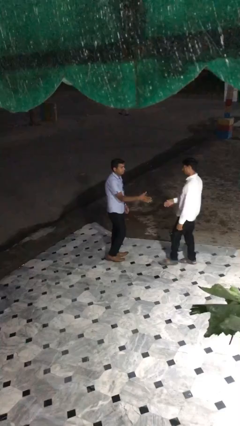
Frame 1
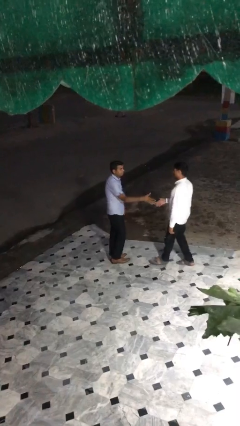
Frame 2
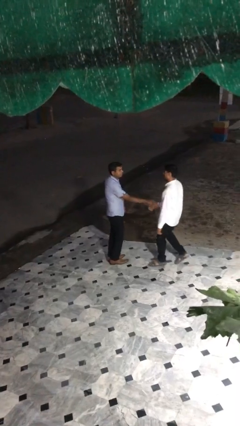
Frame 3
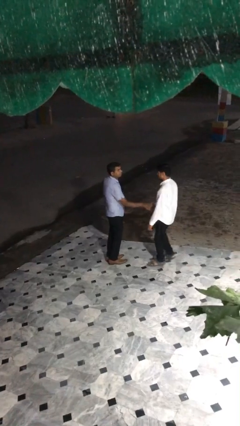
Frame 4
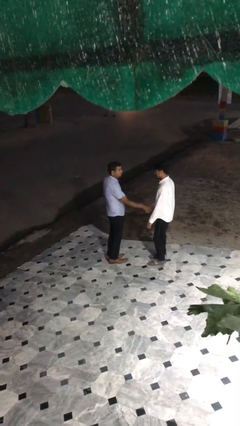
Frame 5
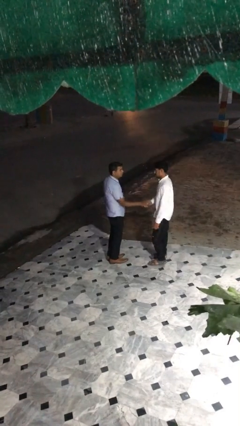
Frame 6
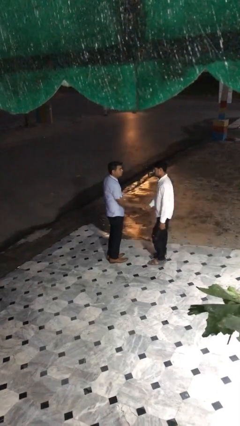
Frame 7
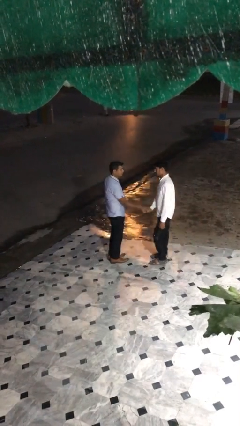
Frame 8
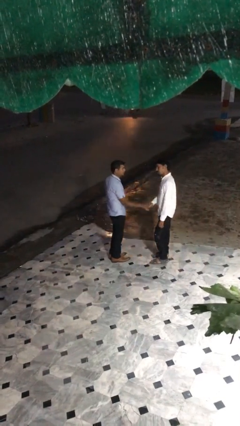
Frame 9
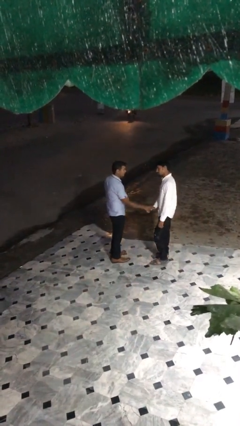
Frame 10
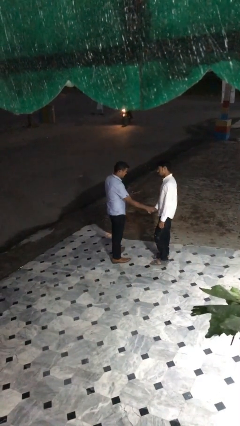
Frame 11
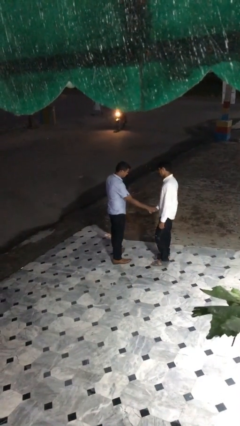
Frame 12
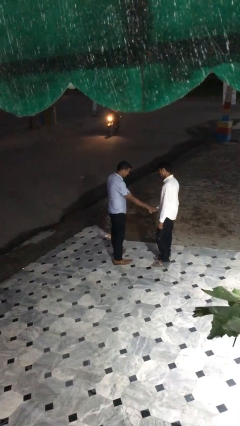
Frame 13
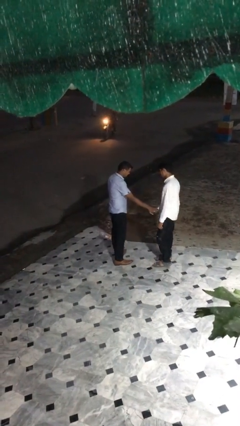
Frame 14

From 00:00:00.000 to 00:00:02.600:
person shakes hand

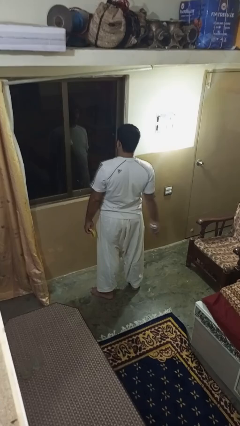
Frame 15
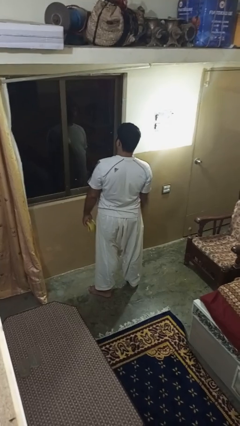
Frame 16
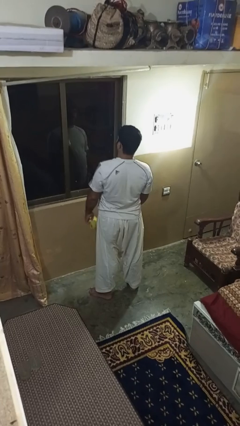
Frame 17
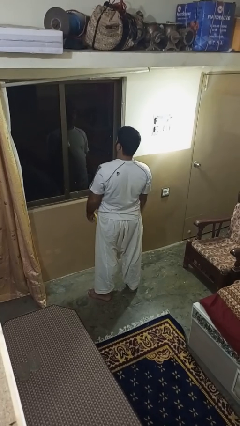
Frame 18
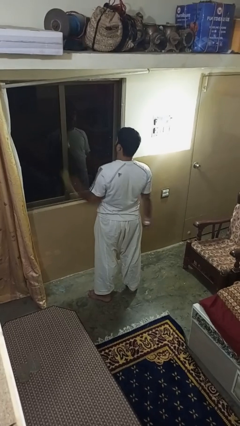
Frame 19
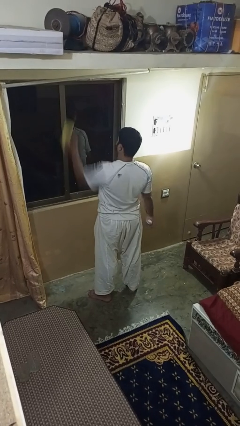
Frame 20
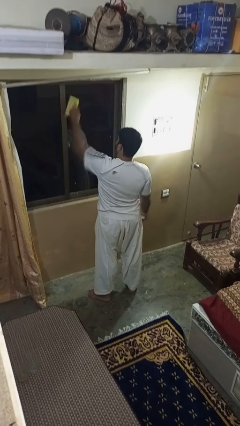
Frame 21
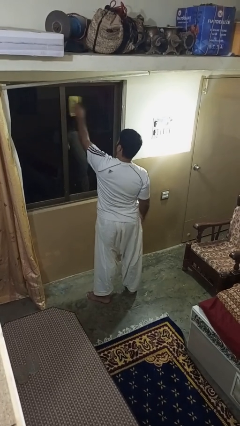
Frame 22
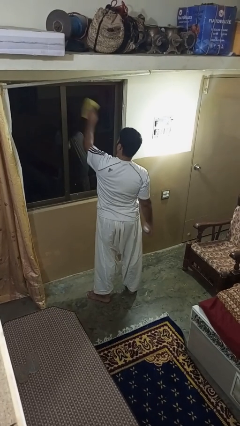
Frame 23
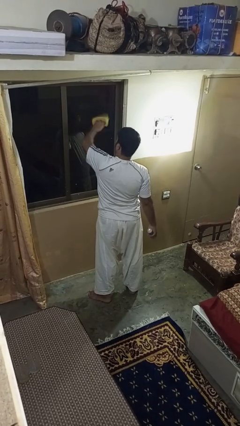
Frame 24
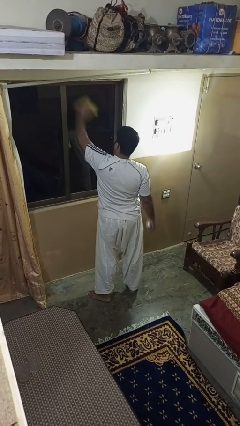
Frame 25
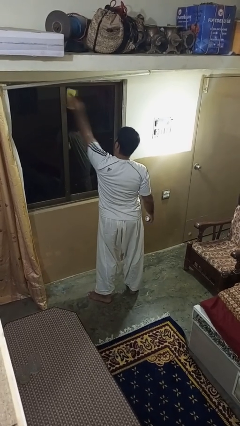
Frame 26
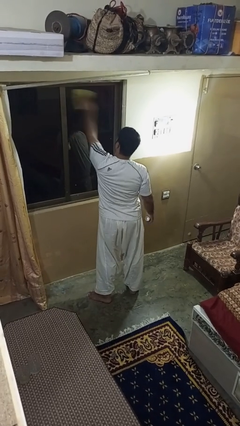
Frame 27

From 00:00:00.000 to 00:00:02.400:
person washes window

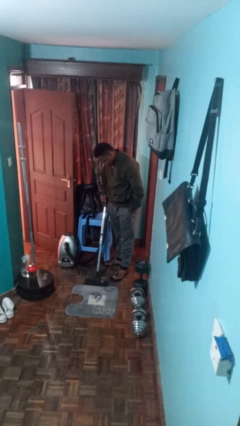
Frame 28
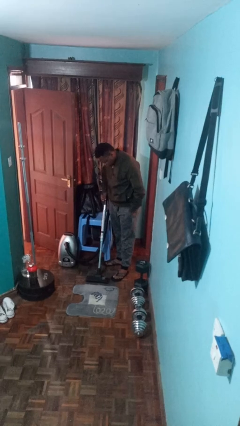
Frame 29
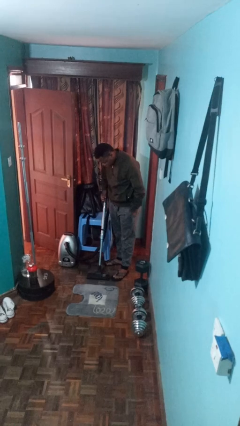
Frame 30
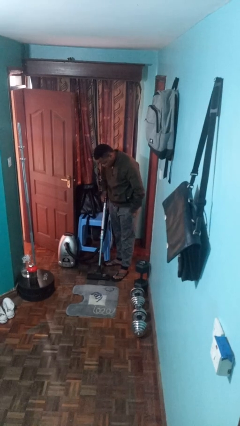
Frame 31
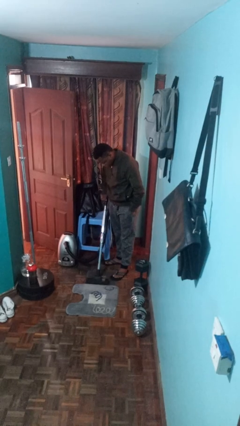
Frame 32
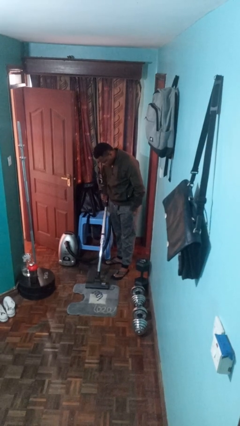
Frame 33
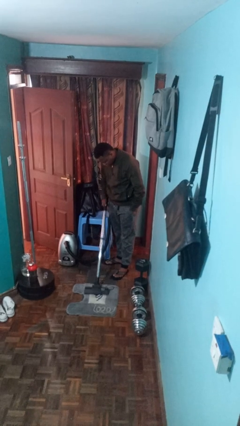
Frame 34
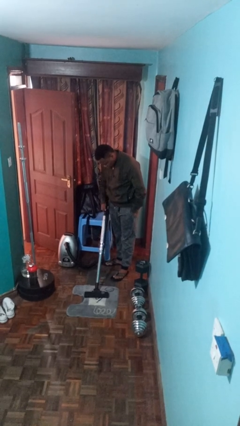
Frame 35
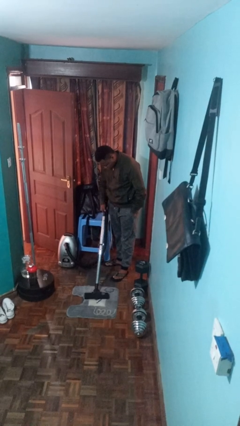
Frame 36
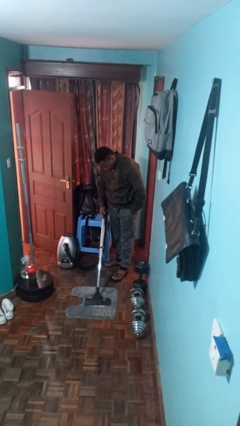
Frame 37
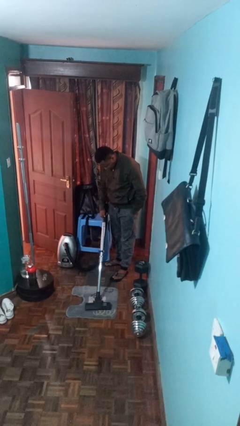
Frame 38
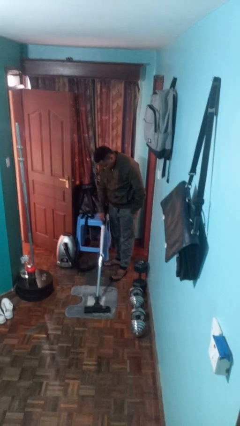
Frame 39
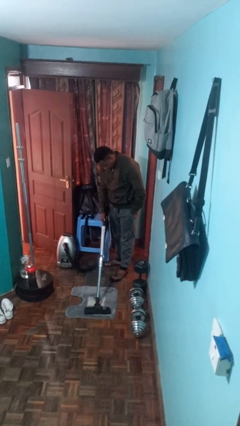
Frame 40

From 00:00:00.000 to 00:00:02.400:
person vacuums carpet

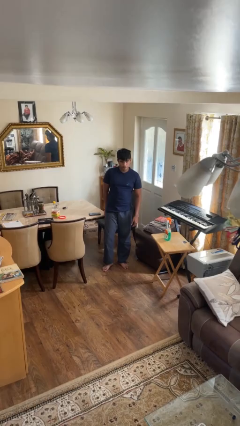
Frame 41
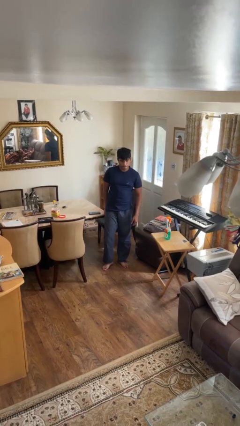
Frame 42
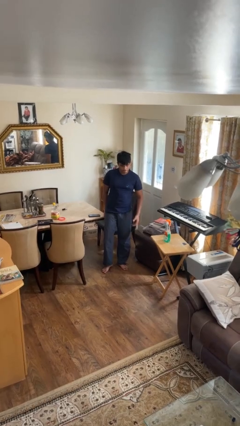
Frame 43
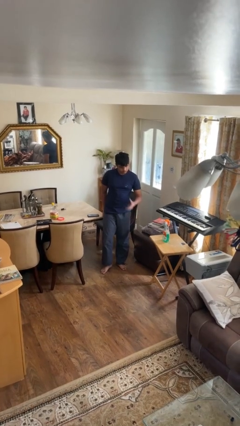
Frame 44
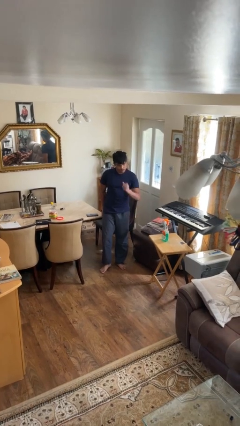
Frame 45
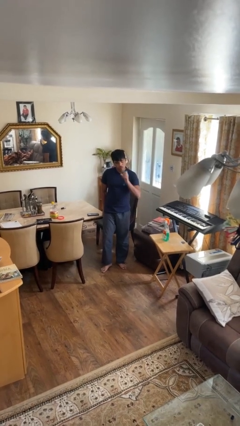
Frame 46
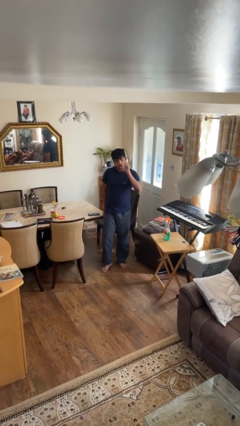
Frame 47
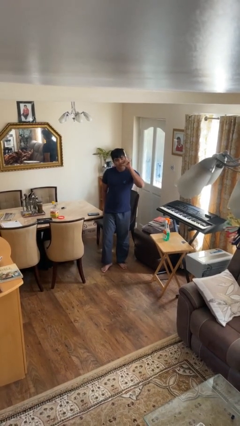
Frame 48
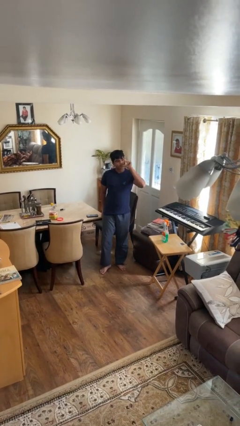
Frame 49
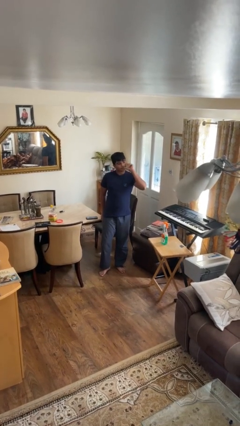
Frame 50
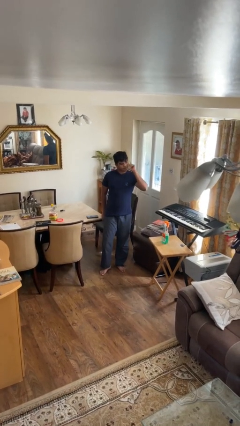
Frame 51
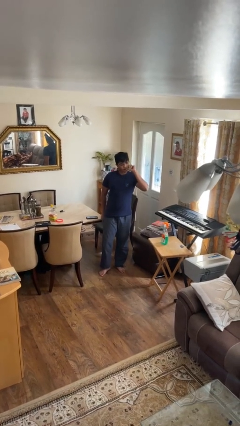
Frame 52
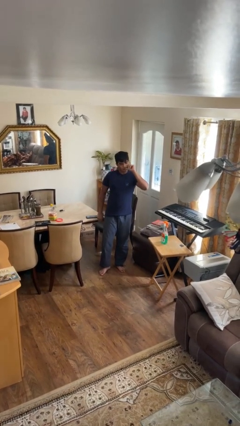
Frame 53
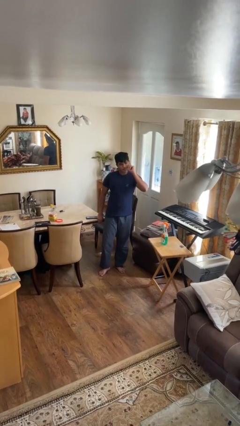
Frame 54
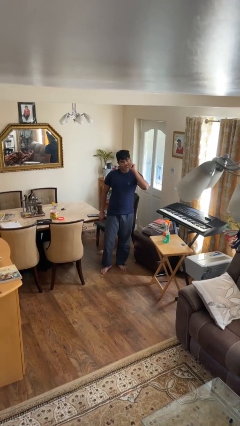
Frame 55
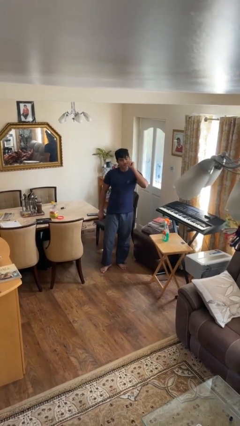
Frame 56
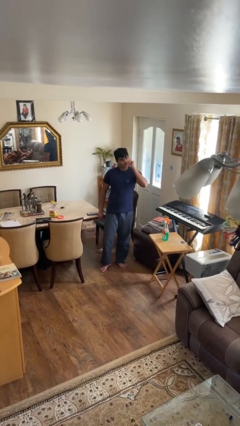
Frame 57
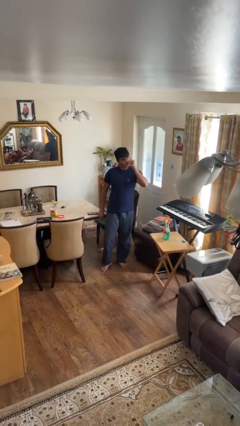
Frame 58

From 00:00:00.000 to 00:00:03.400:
person licks fingers

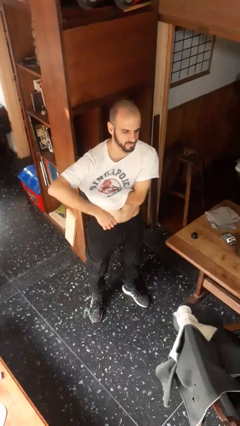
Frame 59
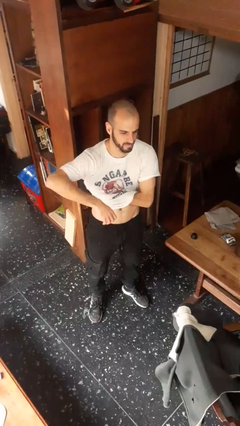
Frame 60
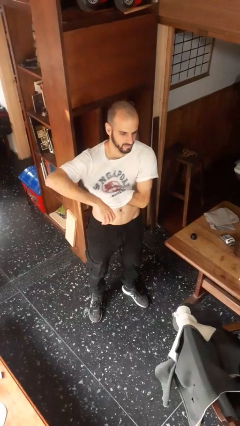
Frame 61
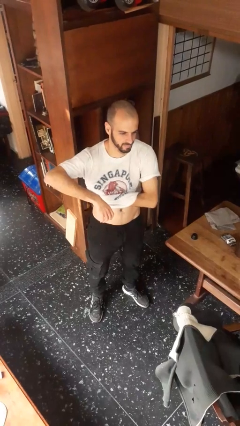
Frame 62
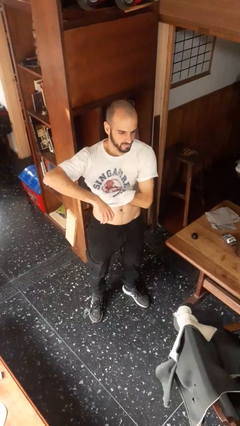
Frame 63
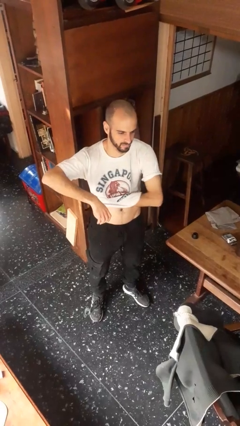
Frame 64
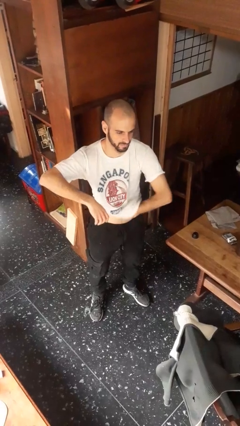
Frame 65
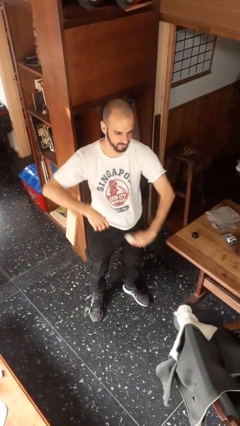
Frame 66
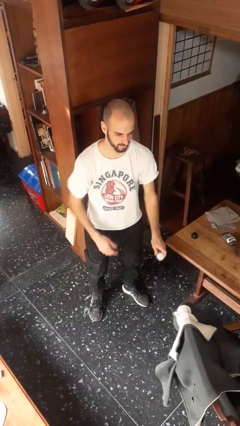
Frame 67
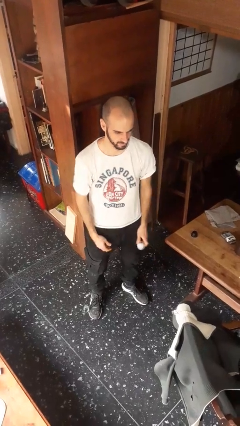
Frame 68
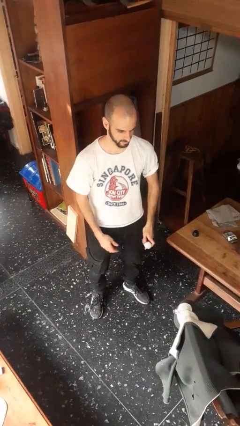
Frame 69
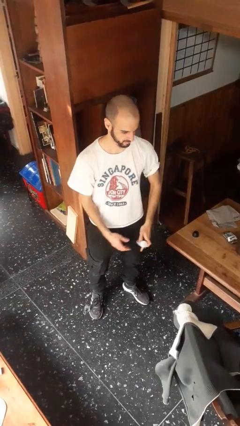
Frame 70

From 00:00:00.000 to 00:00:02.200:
person applies deodorant

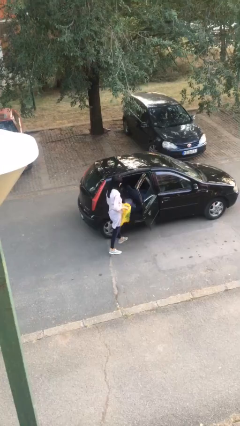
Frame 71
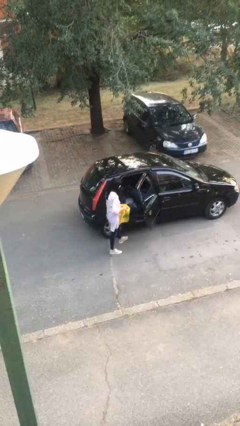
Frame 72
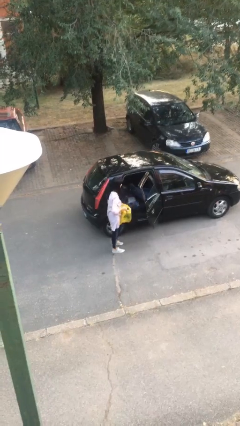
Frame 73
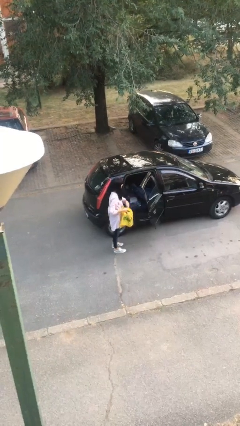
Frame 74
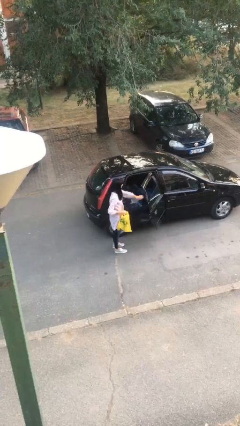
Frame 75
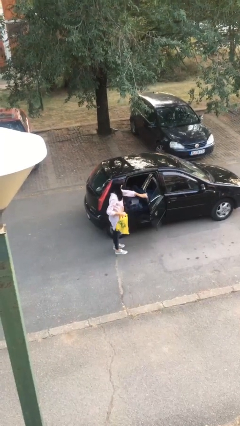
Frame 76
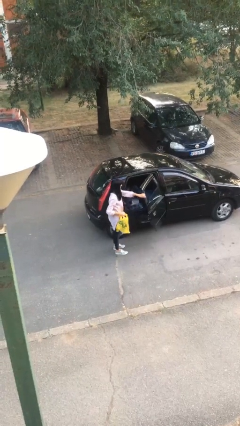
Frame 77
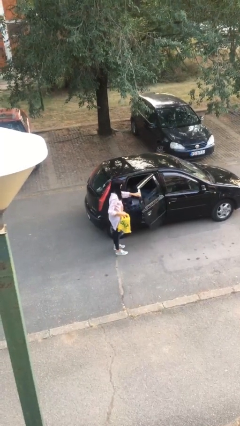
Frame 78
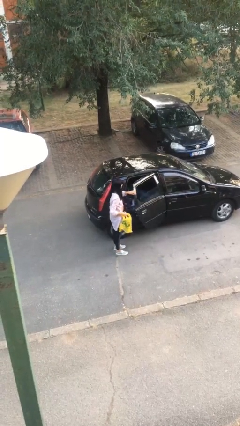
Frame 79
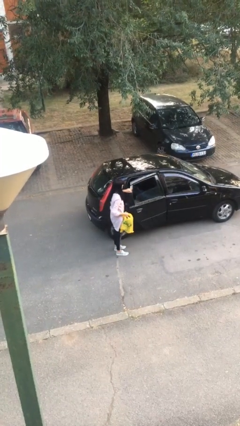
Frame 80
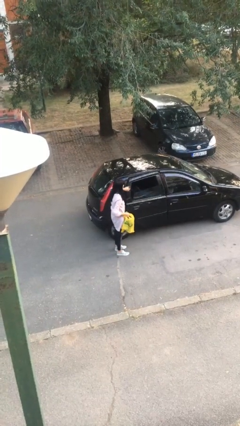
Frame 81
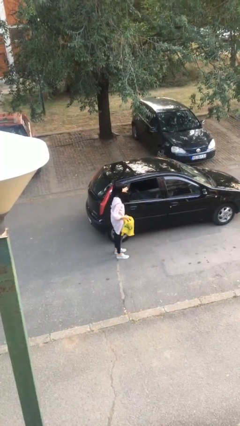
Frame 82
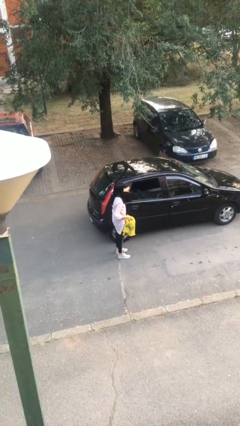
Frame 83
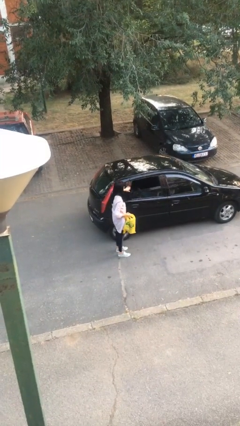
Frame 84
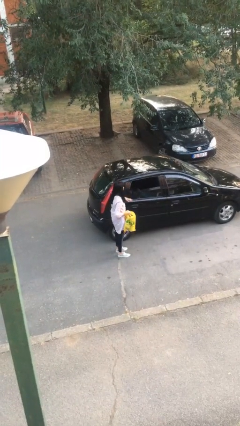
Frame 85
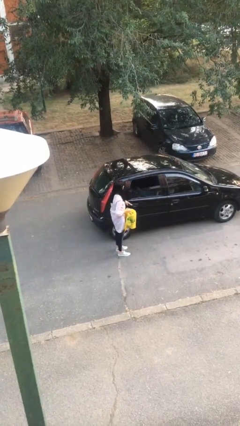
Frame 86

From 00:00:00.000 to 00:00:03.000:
person closes car door

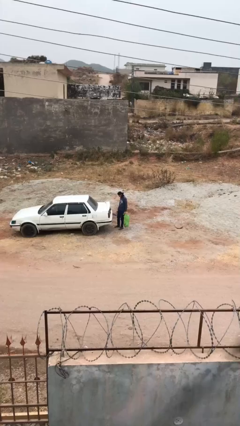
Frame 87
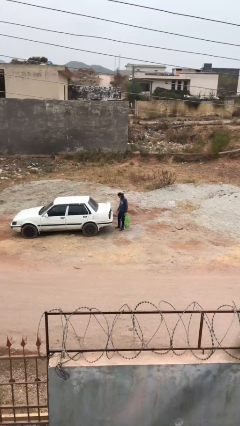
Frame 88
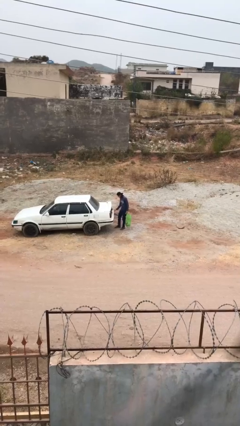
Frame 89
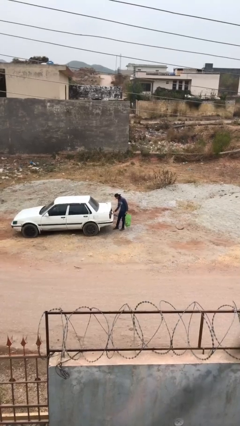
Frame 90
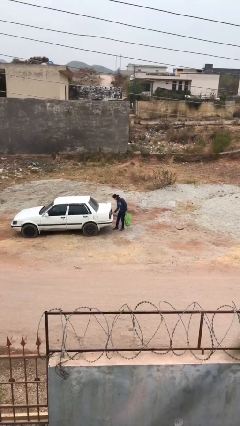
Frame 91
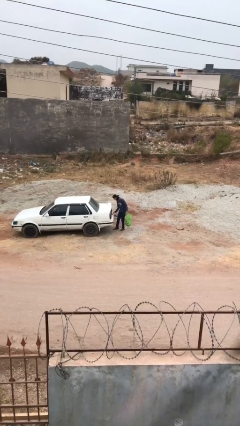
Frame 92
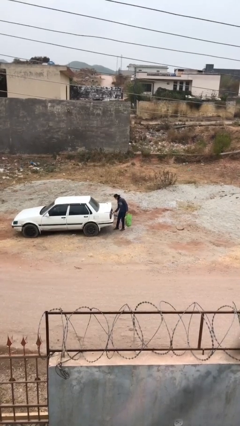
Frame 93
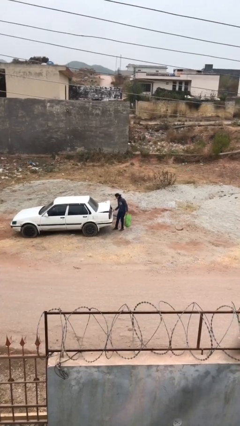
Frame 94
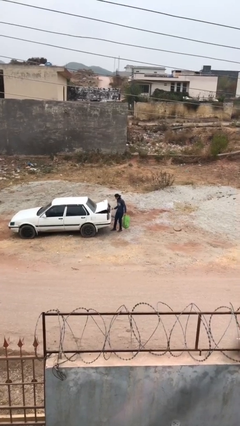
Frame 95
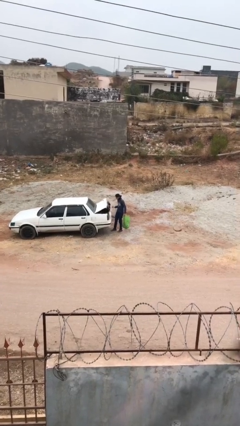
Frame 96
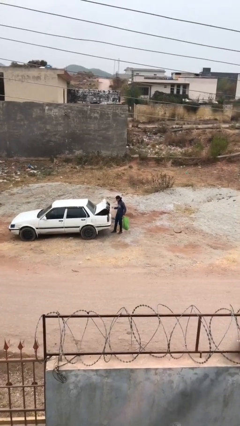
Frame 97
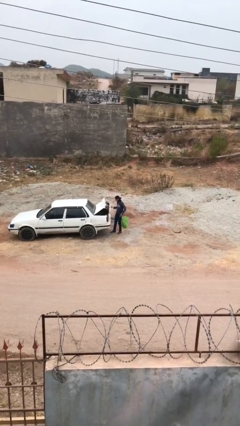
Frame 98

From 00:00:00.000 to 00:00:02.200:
person opens car trunk
